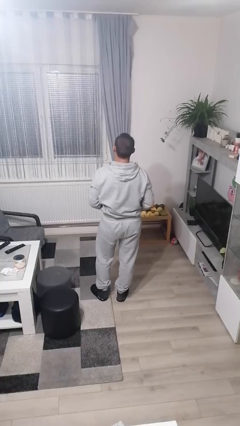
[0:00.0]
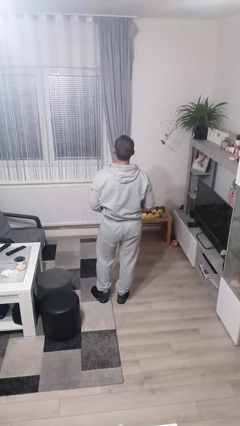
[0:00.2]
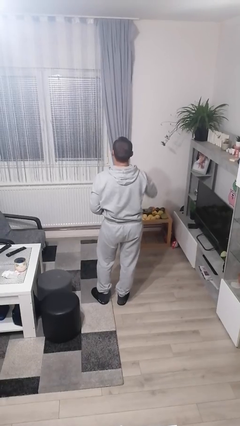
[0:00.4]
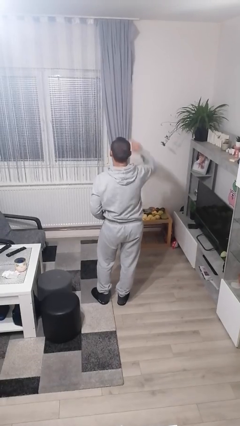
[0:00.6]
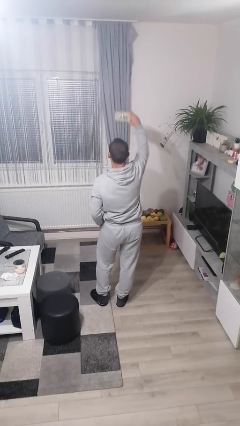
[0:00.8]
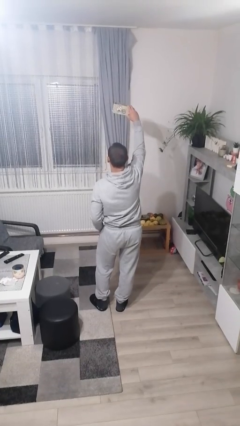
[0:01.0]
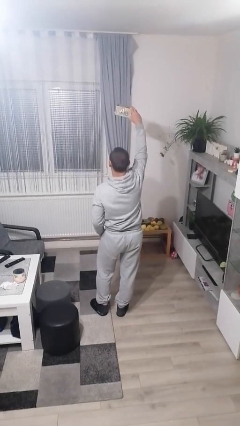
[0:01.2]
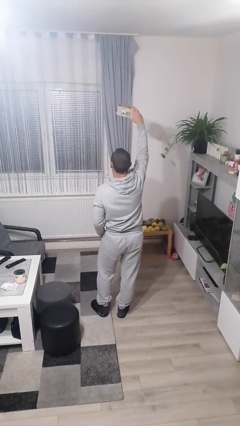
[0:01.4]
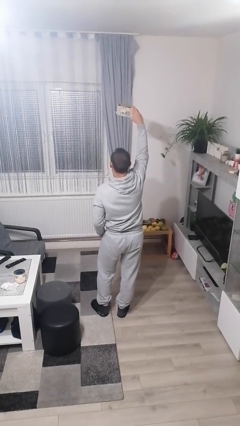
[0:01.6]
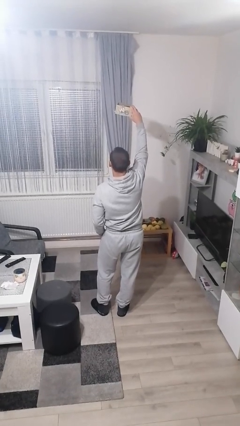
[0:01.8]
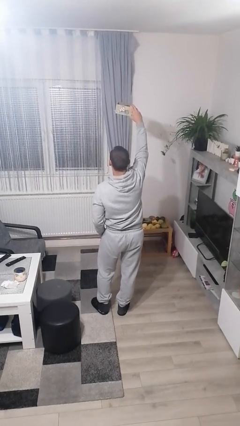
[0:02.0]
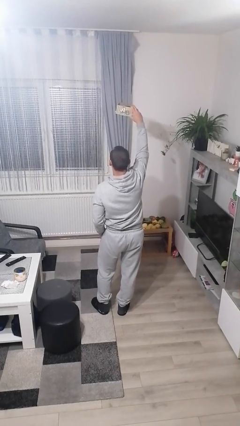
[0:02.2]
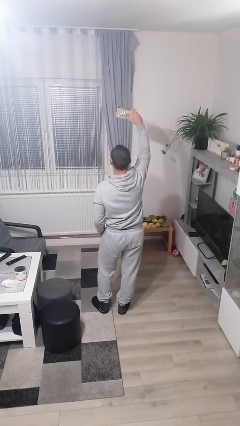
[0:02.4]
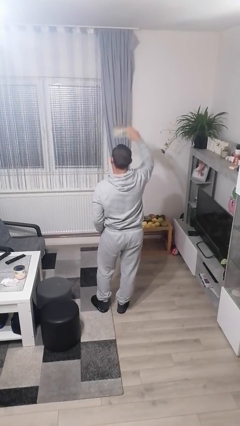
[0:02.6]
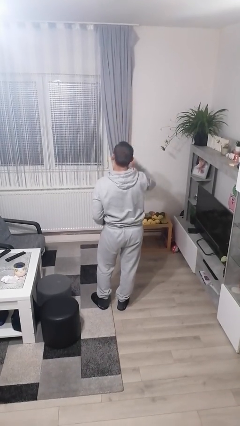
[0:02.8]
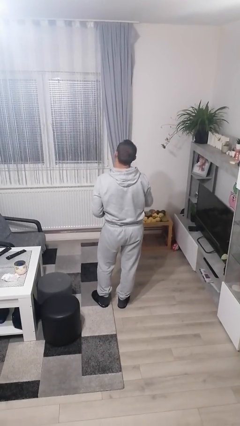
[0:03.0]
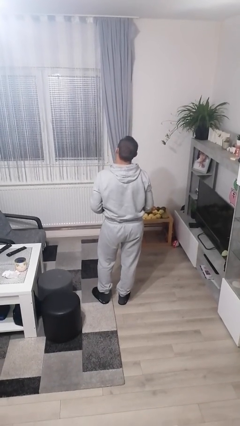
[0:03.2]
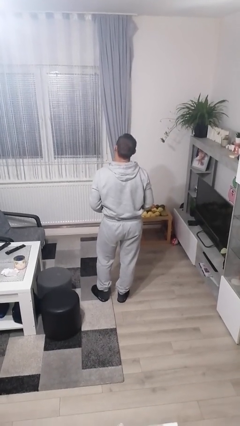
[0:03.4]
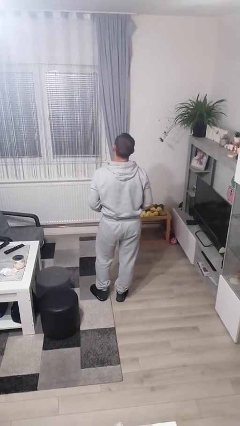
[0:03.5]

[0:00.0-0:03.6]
person holds object above head

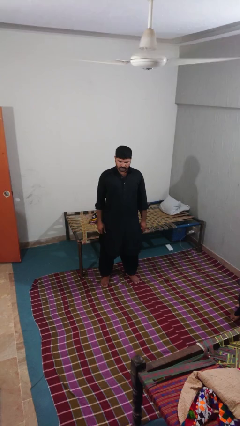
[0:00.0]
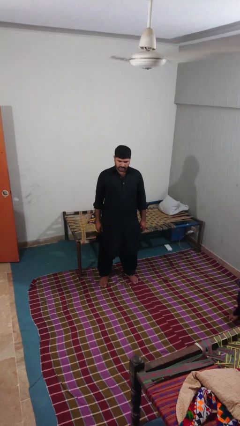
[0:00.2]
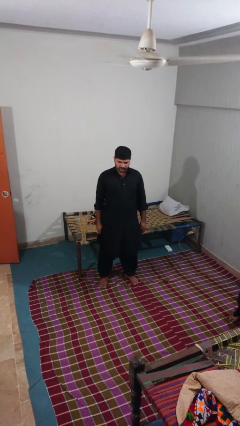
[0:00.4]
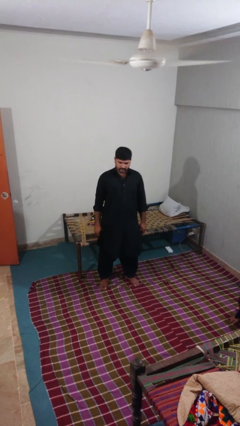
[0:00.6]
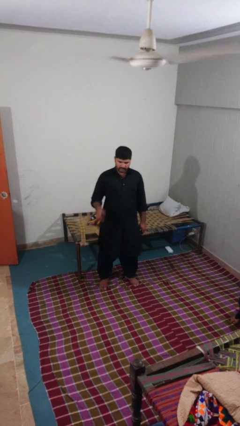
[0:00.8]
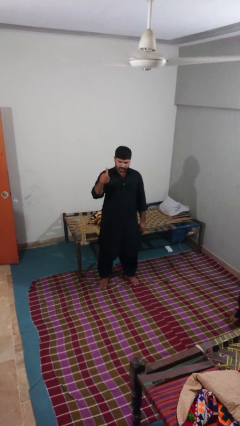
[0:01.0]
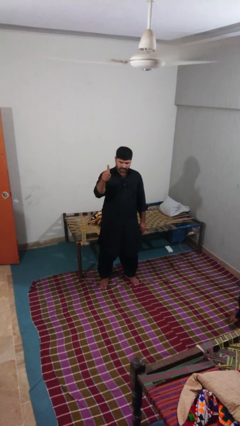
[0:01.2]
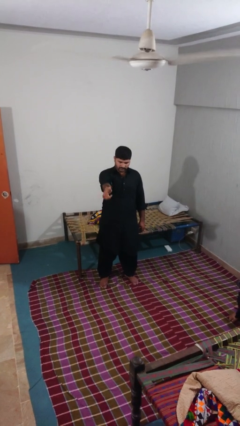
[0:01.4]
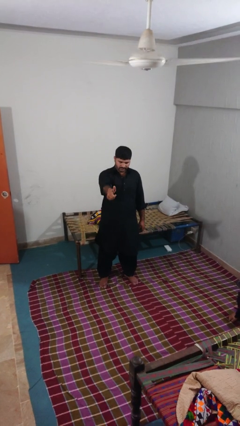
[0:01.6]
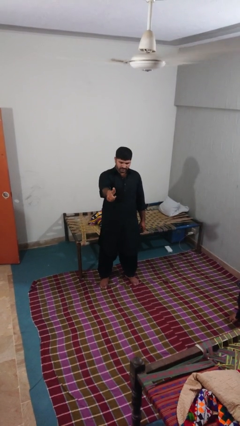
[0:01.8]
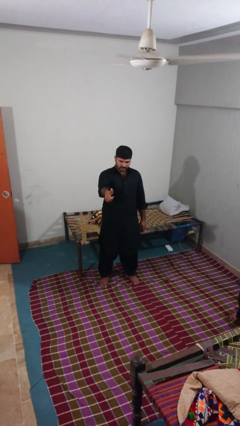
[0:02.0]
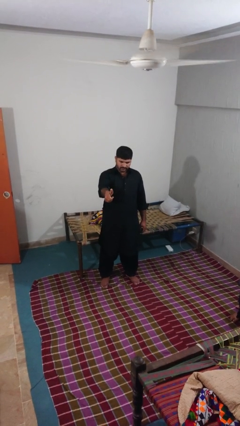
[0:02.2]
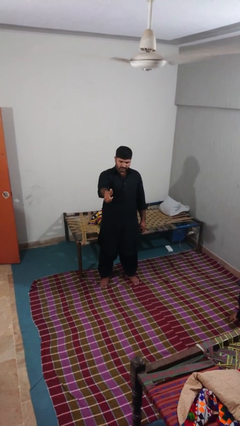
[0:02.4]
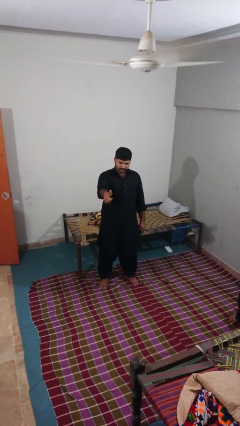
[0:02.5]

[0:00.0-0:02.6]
person gestures thumbs up

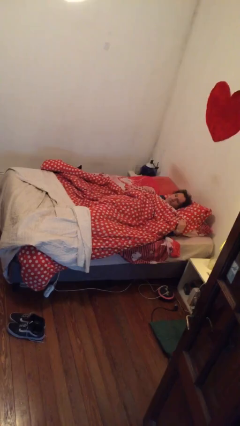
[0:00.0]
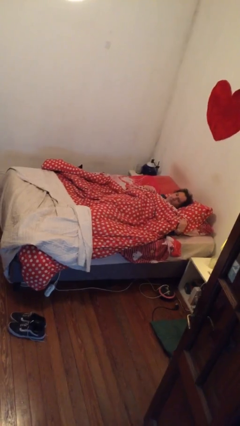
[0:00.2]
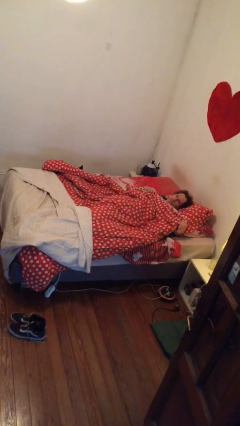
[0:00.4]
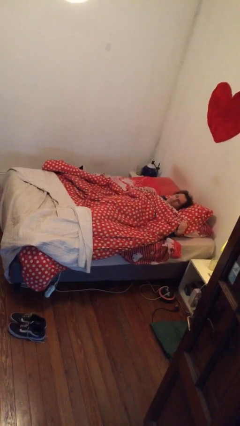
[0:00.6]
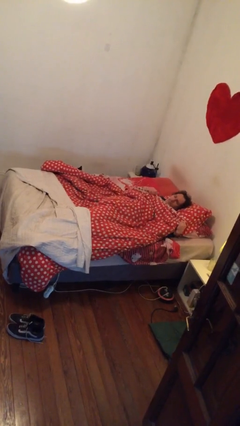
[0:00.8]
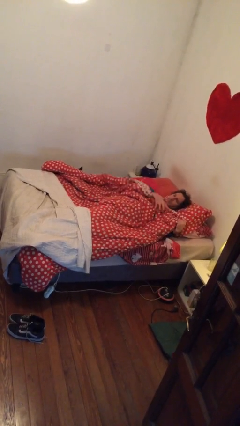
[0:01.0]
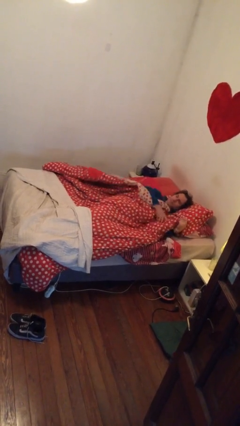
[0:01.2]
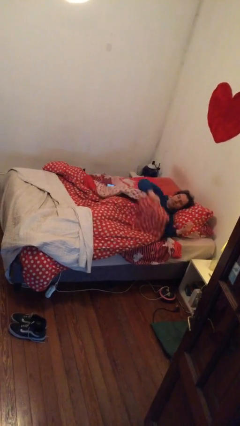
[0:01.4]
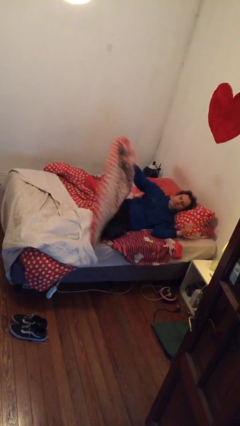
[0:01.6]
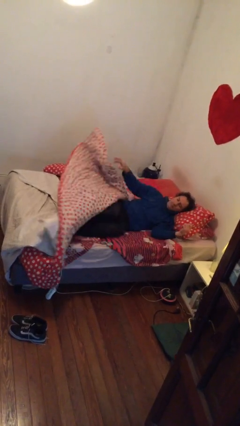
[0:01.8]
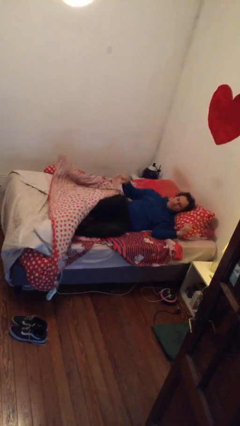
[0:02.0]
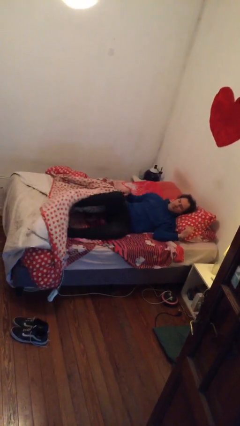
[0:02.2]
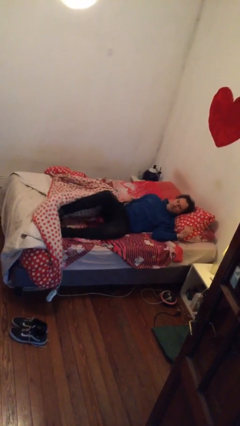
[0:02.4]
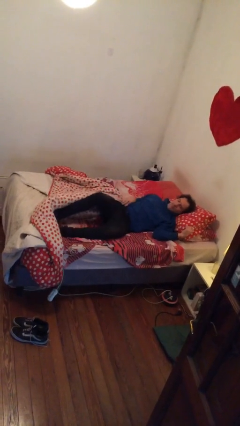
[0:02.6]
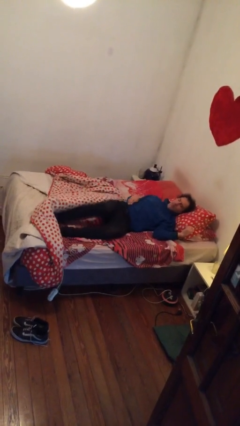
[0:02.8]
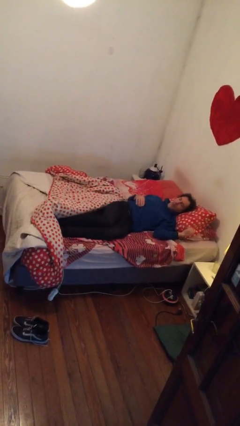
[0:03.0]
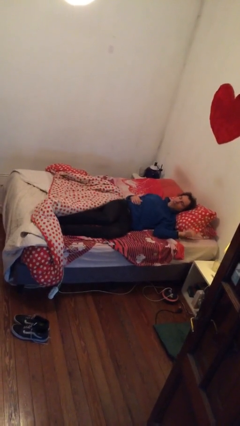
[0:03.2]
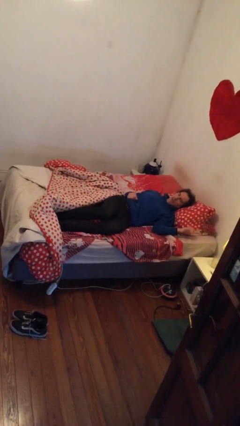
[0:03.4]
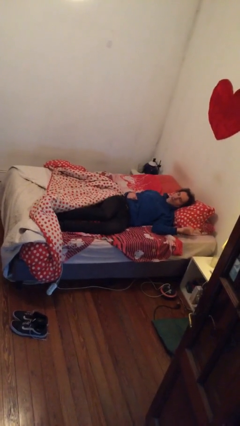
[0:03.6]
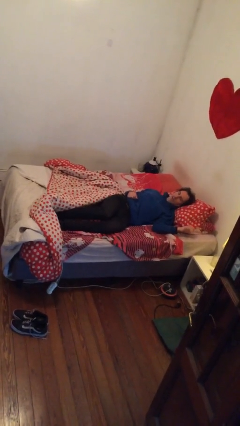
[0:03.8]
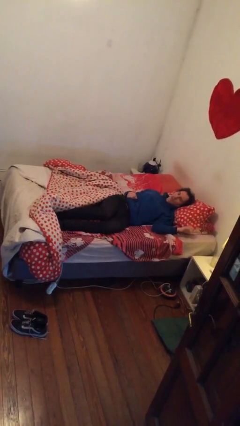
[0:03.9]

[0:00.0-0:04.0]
person uncovers with bedsheets

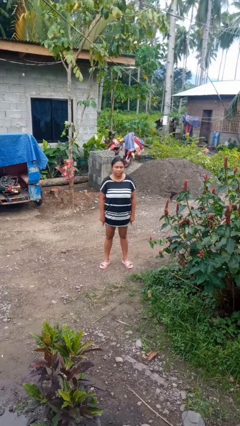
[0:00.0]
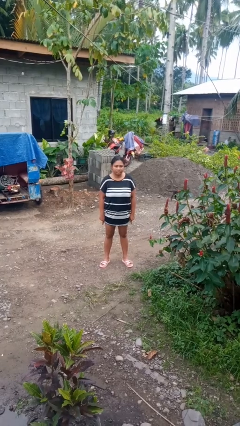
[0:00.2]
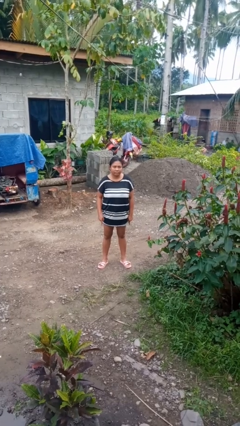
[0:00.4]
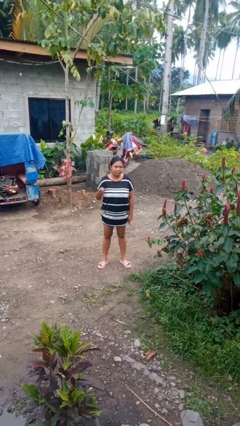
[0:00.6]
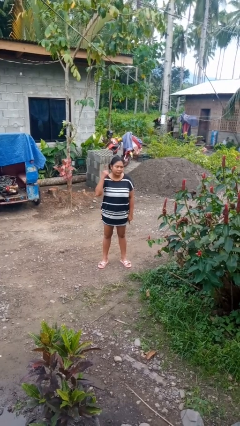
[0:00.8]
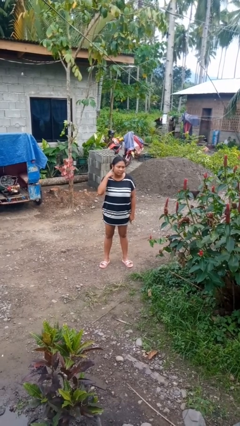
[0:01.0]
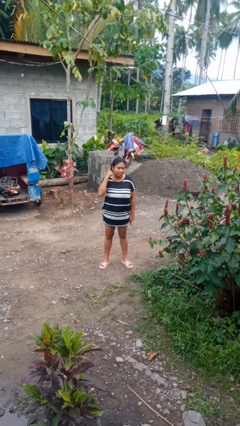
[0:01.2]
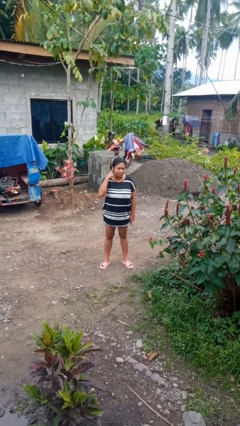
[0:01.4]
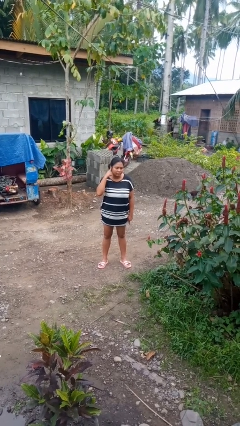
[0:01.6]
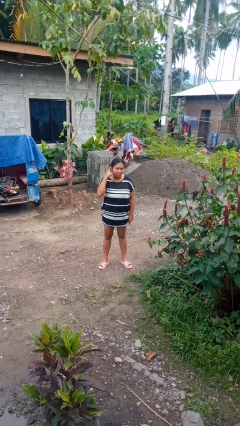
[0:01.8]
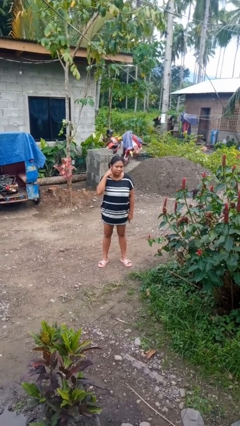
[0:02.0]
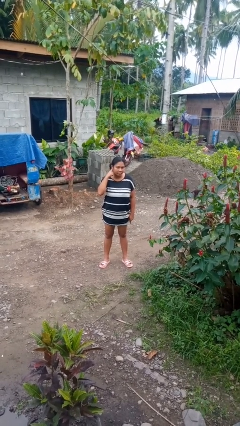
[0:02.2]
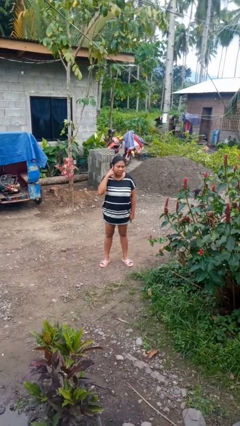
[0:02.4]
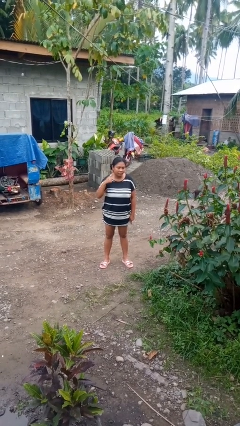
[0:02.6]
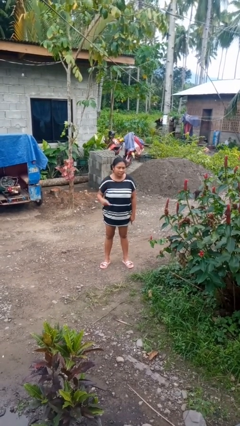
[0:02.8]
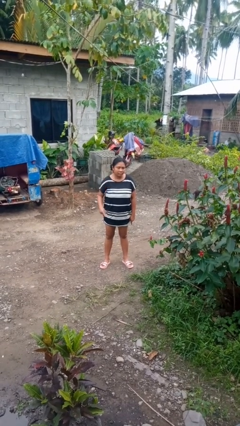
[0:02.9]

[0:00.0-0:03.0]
person gestures listen closely

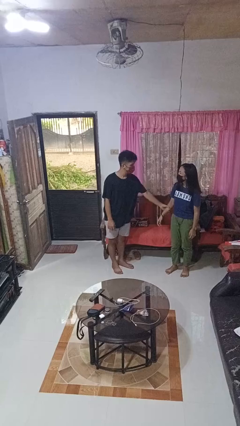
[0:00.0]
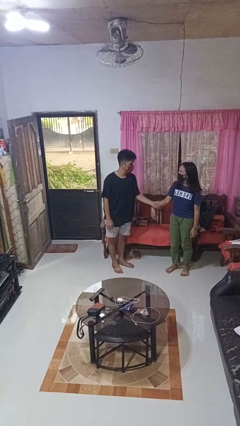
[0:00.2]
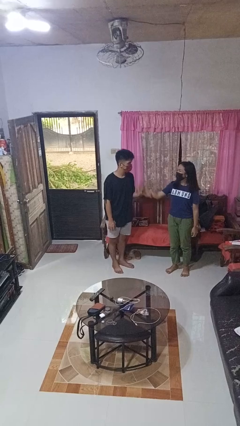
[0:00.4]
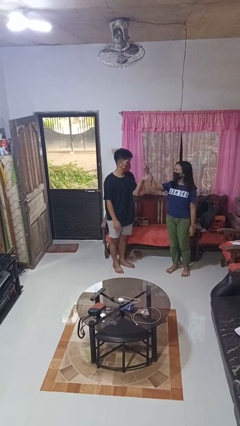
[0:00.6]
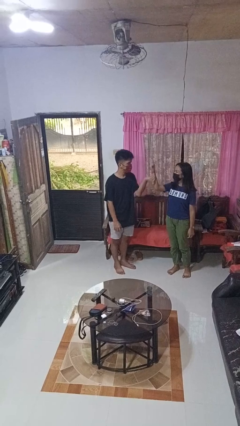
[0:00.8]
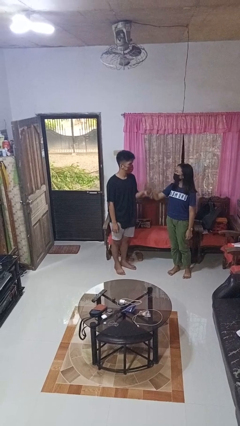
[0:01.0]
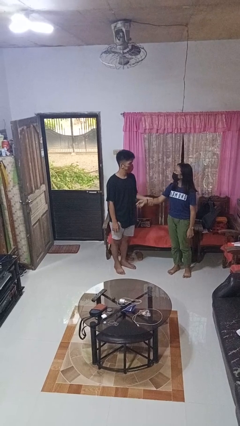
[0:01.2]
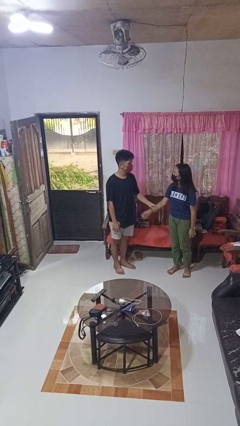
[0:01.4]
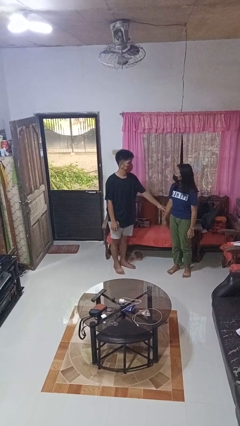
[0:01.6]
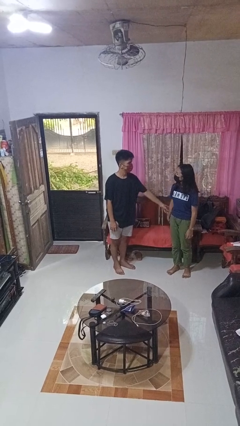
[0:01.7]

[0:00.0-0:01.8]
person grabs person by forearm

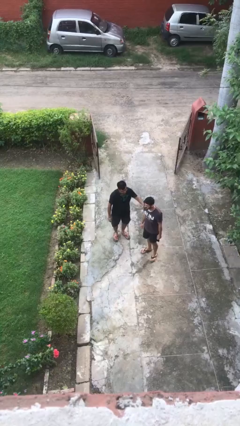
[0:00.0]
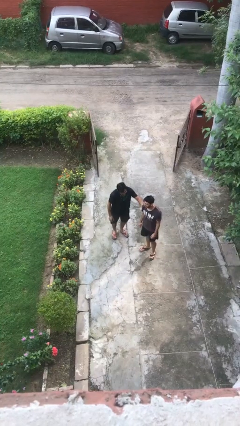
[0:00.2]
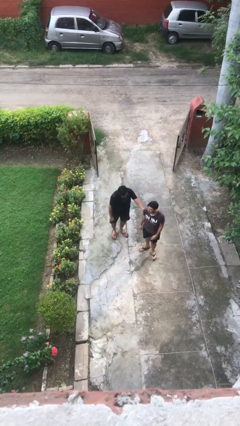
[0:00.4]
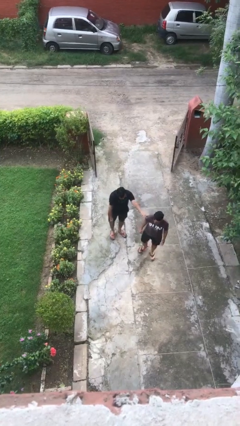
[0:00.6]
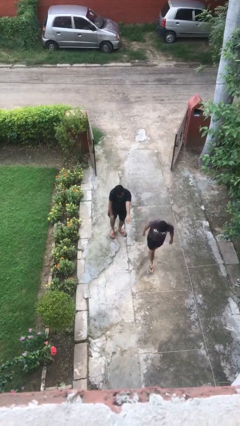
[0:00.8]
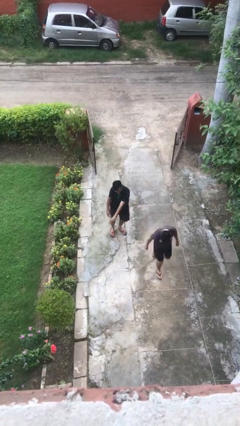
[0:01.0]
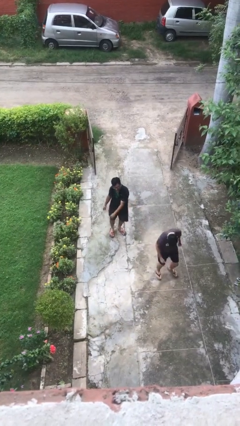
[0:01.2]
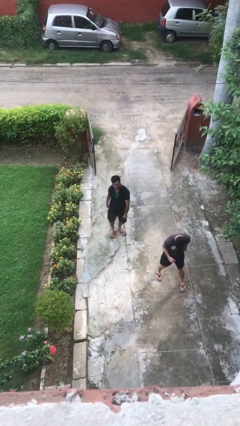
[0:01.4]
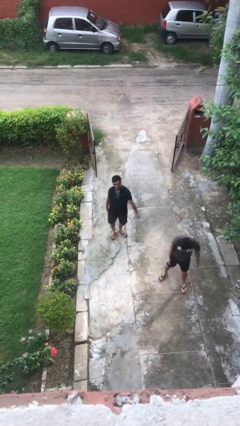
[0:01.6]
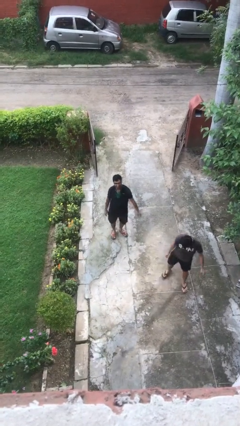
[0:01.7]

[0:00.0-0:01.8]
person shoves person

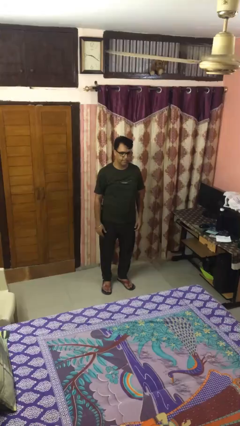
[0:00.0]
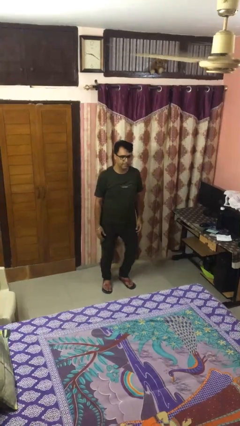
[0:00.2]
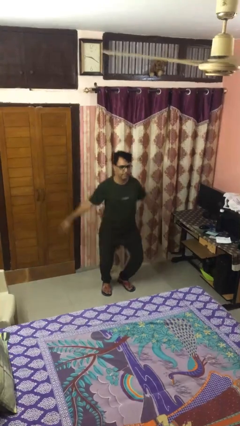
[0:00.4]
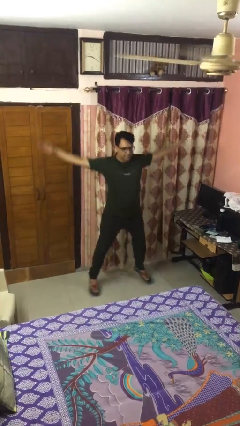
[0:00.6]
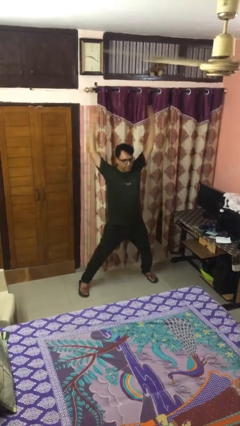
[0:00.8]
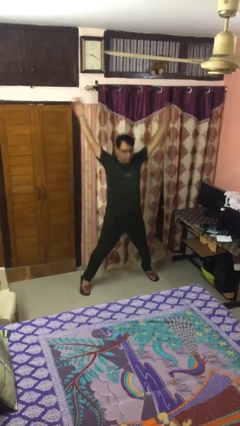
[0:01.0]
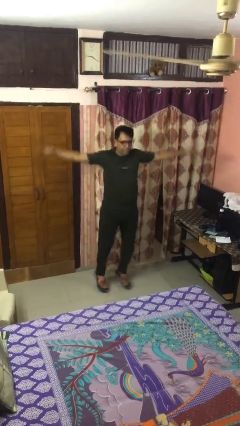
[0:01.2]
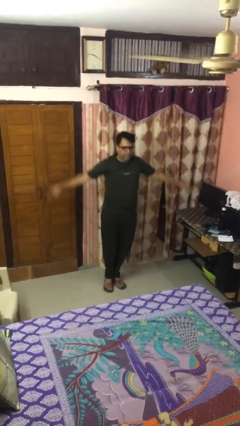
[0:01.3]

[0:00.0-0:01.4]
person exercises with jumping jacks
